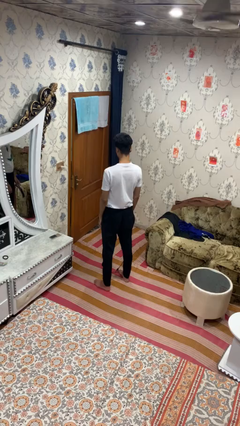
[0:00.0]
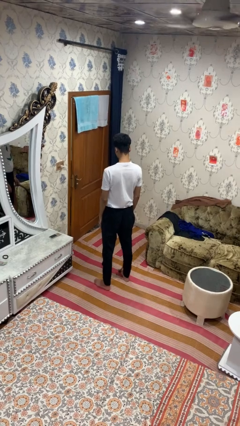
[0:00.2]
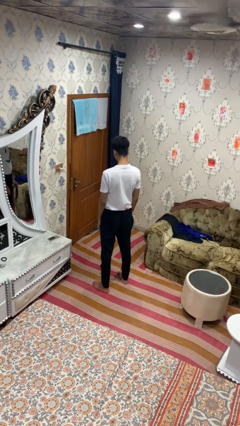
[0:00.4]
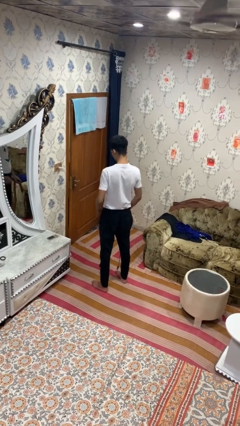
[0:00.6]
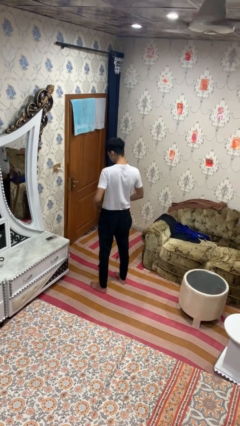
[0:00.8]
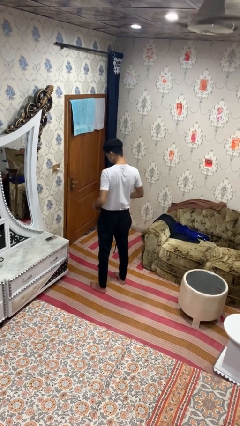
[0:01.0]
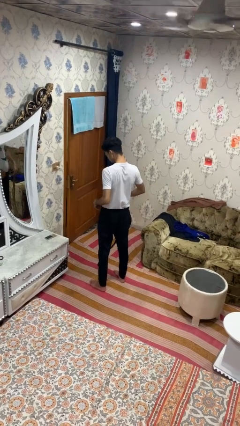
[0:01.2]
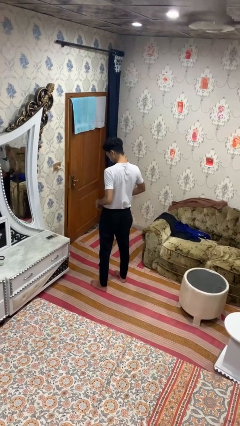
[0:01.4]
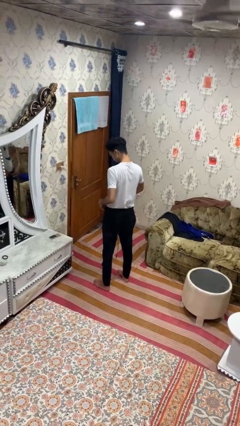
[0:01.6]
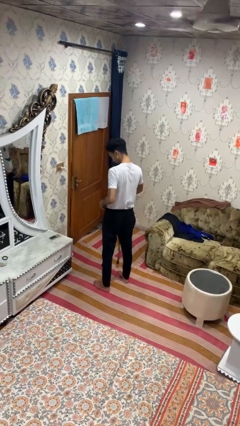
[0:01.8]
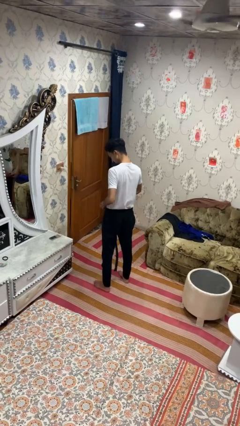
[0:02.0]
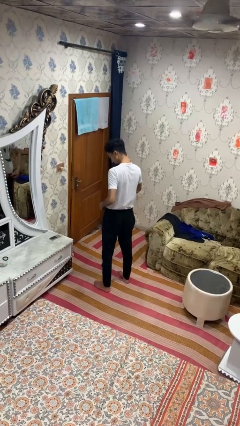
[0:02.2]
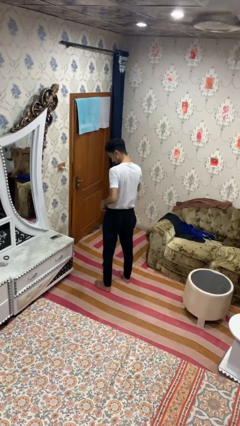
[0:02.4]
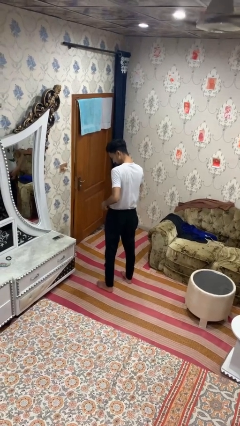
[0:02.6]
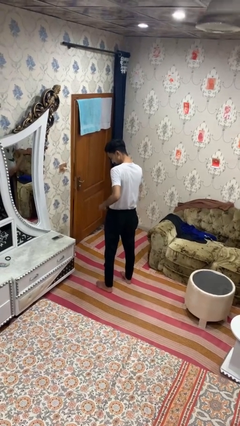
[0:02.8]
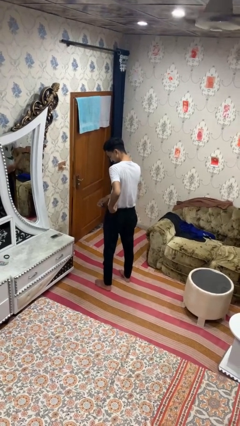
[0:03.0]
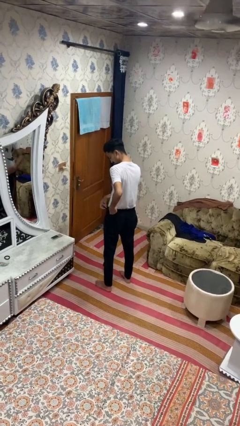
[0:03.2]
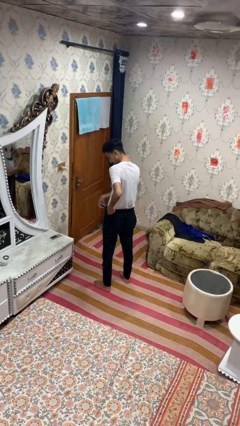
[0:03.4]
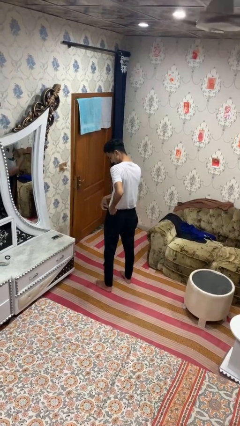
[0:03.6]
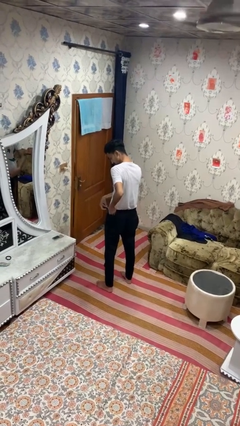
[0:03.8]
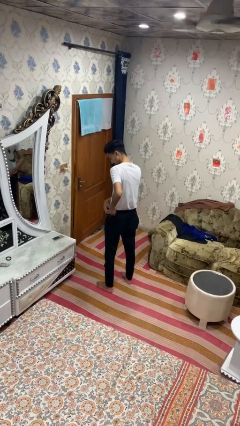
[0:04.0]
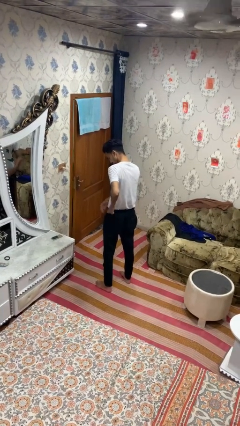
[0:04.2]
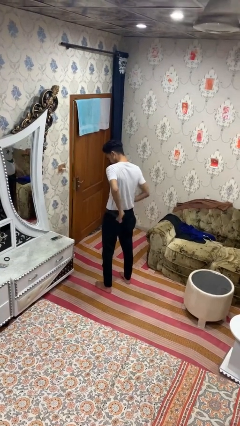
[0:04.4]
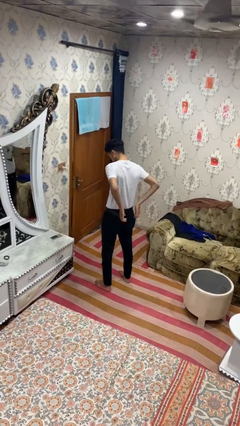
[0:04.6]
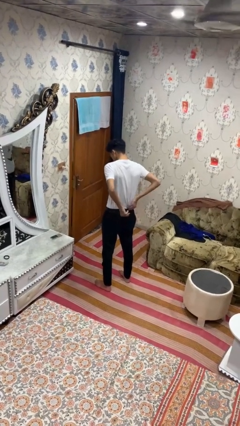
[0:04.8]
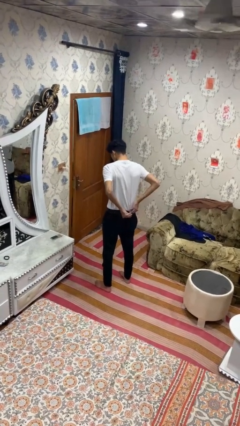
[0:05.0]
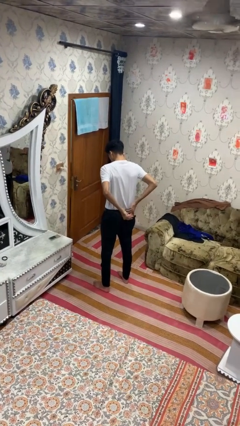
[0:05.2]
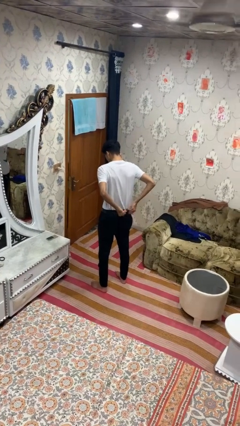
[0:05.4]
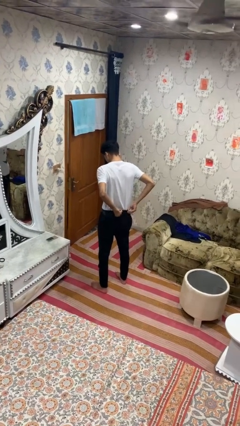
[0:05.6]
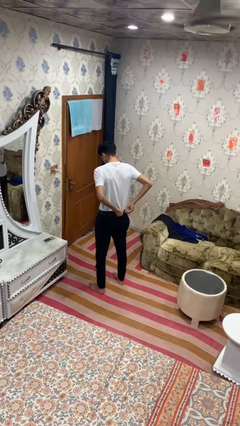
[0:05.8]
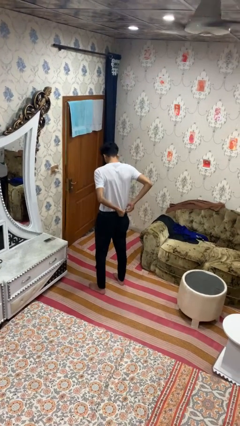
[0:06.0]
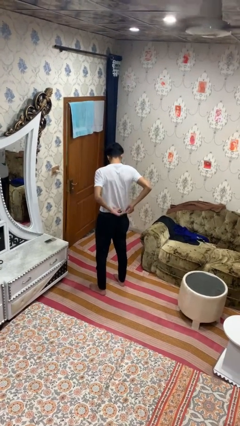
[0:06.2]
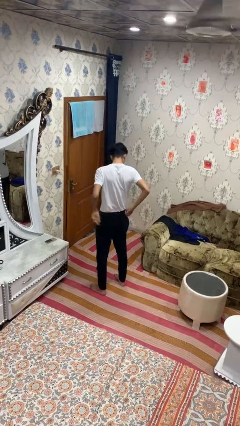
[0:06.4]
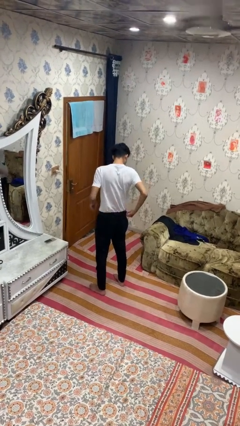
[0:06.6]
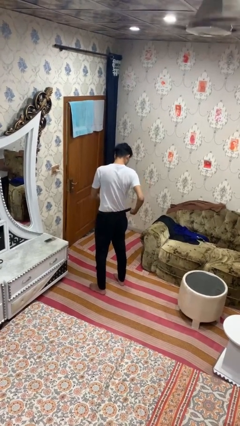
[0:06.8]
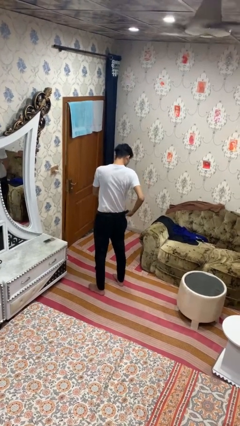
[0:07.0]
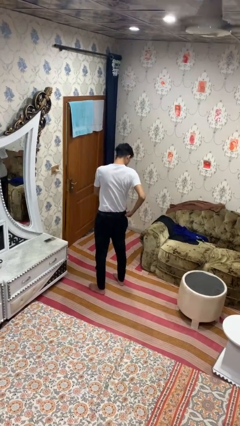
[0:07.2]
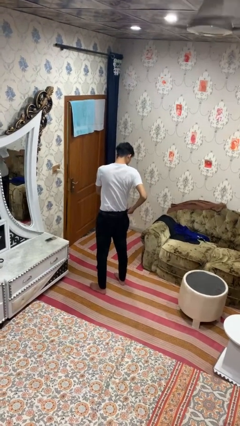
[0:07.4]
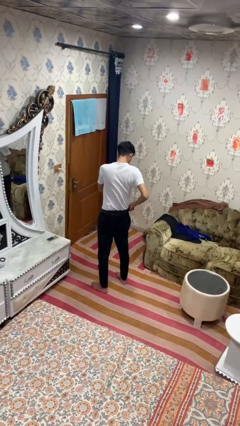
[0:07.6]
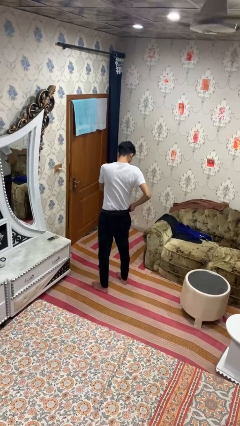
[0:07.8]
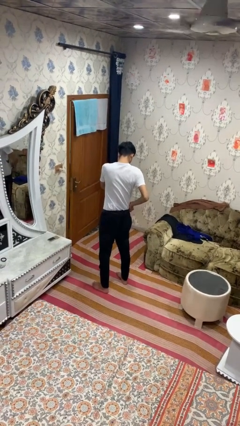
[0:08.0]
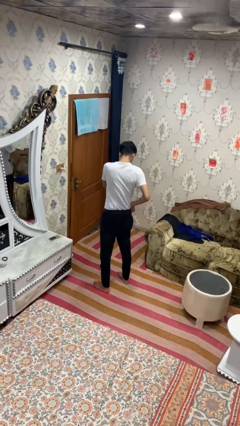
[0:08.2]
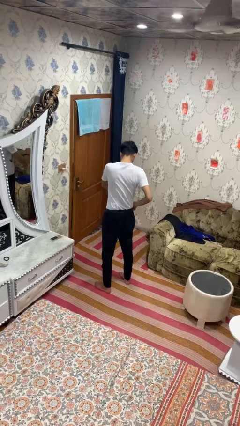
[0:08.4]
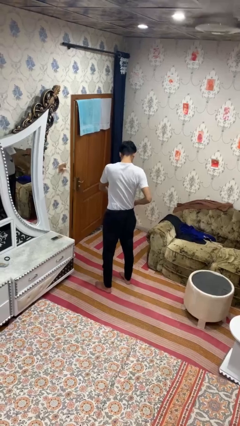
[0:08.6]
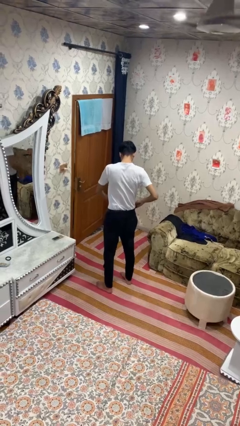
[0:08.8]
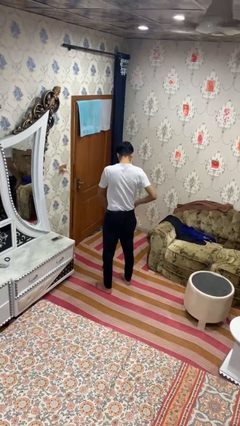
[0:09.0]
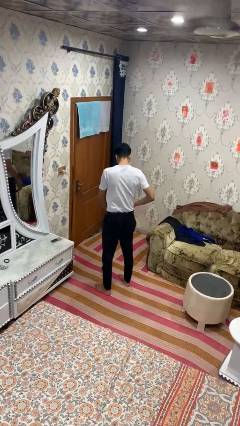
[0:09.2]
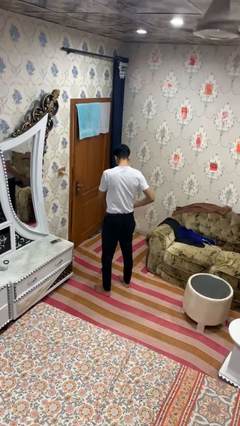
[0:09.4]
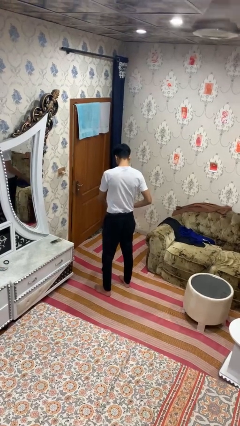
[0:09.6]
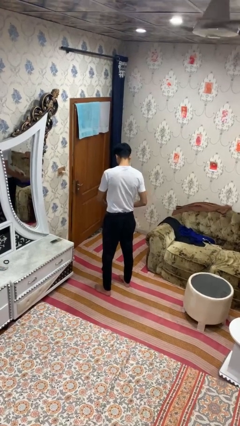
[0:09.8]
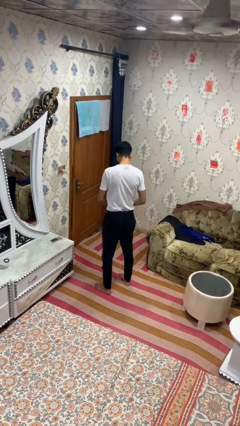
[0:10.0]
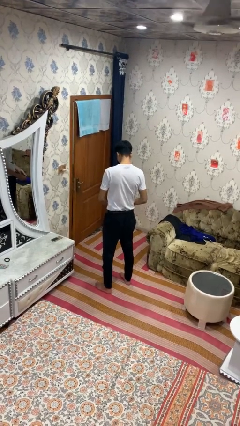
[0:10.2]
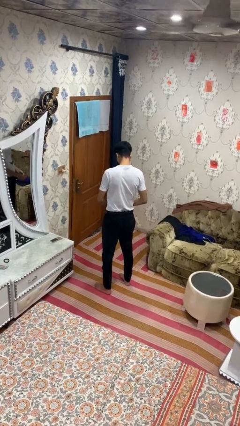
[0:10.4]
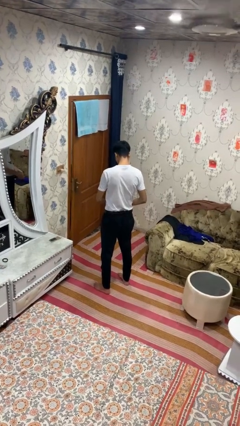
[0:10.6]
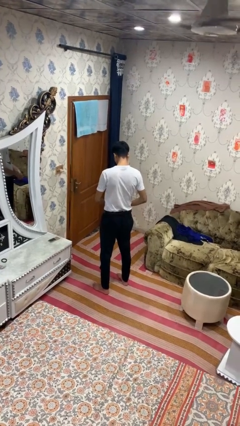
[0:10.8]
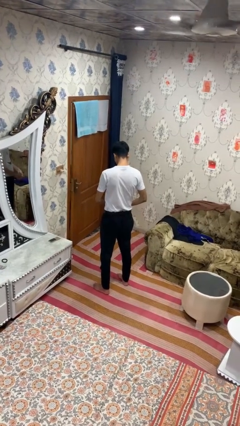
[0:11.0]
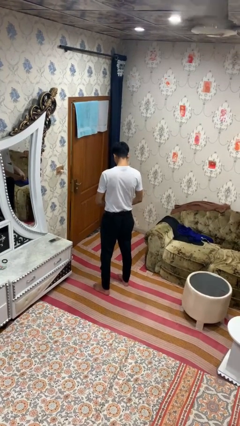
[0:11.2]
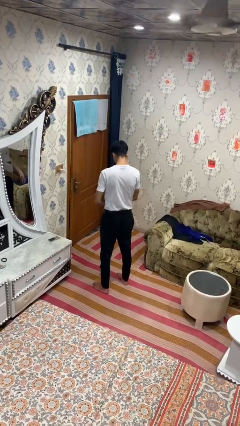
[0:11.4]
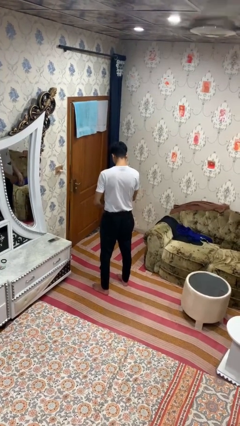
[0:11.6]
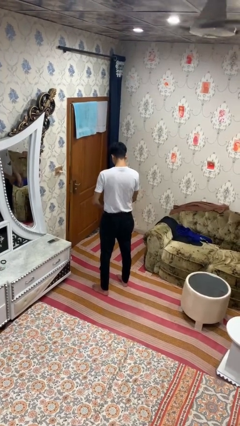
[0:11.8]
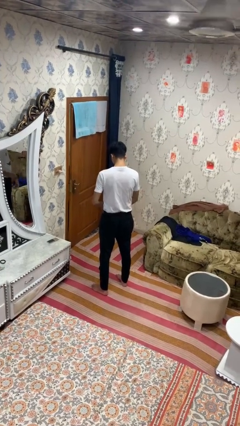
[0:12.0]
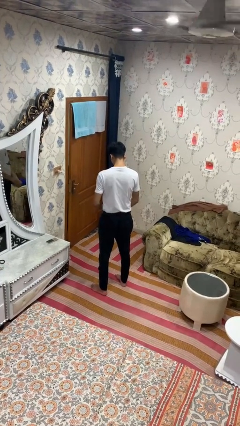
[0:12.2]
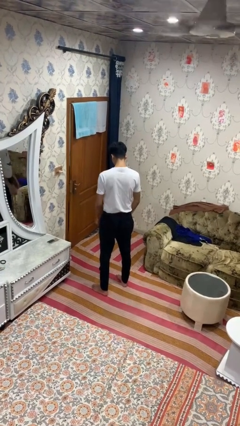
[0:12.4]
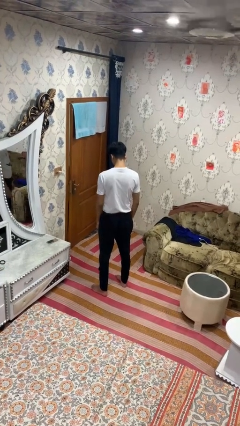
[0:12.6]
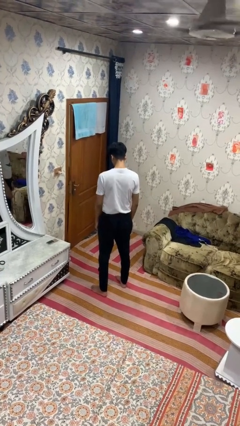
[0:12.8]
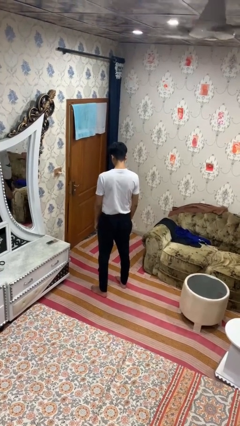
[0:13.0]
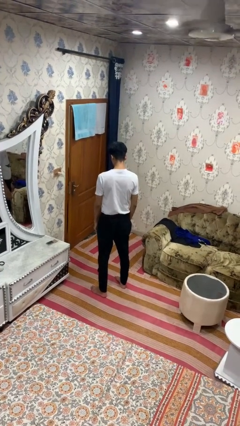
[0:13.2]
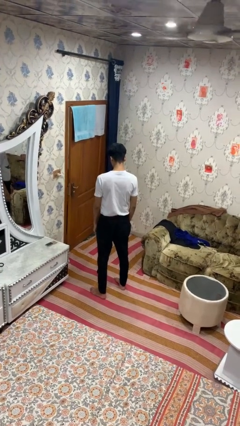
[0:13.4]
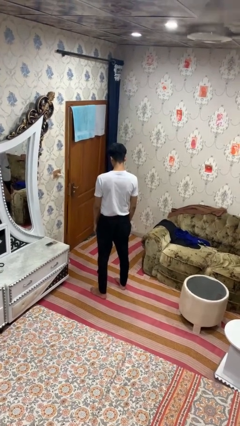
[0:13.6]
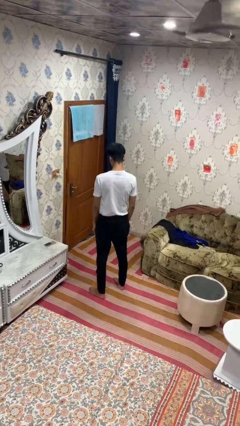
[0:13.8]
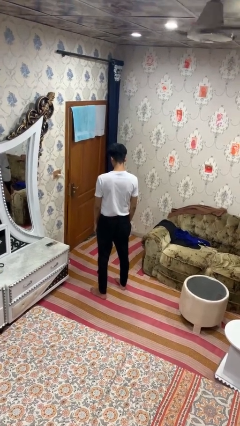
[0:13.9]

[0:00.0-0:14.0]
person puts on belt

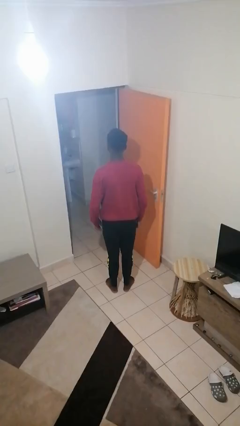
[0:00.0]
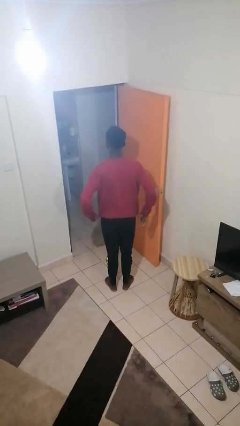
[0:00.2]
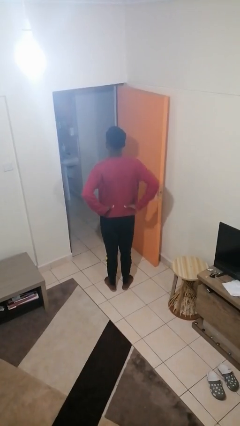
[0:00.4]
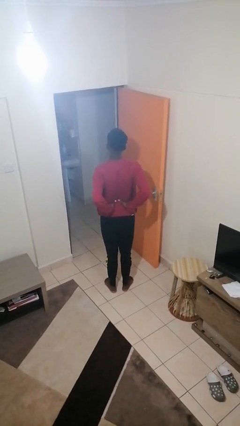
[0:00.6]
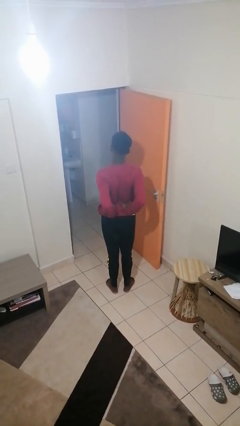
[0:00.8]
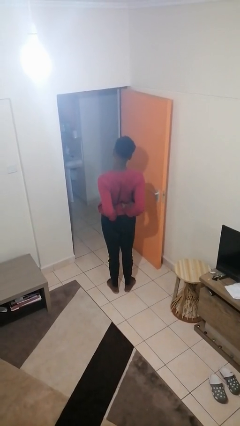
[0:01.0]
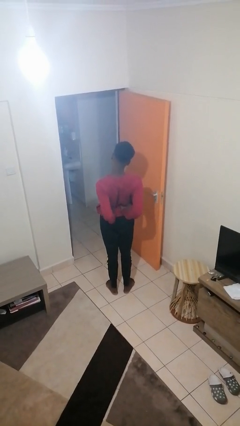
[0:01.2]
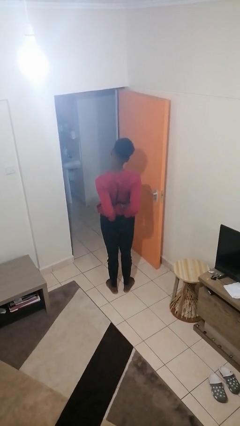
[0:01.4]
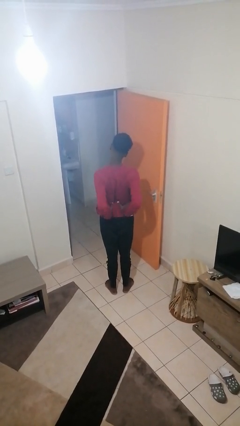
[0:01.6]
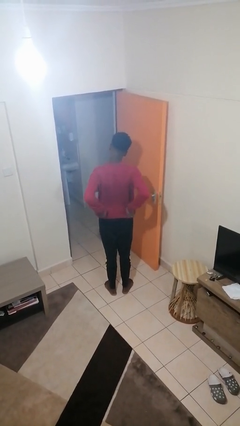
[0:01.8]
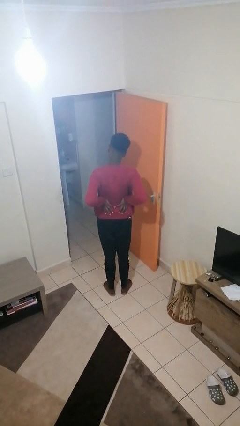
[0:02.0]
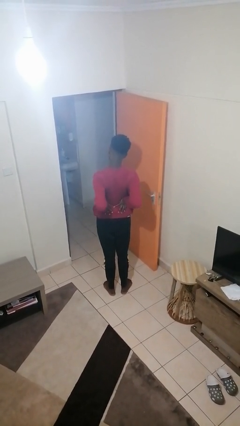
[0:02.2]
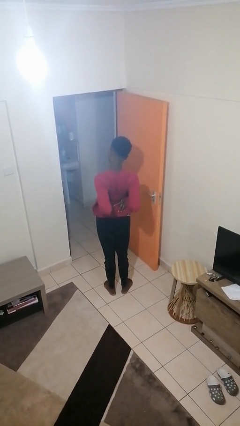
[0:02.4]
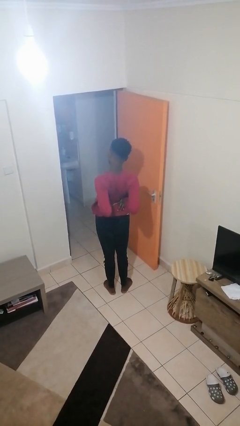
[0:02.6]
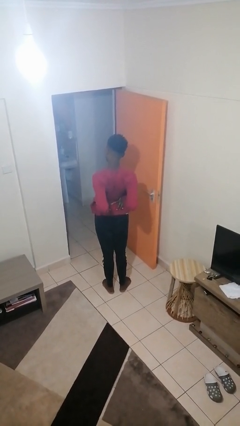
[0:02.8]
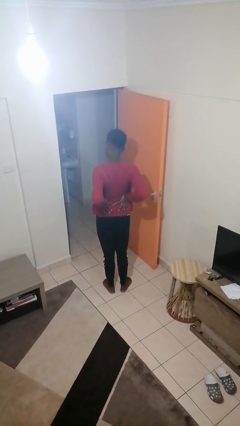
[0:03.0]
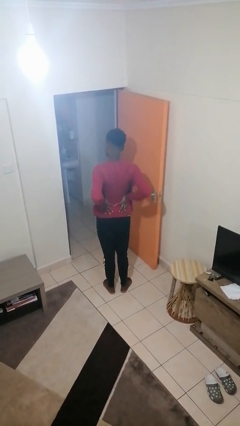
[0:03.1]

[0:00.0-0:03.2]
person stretches back

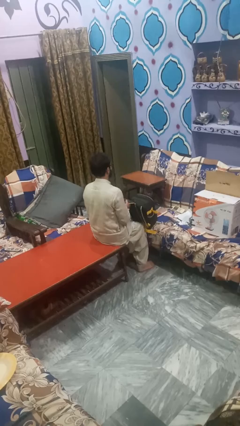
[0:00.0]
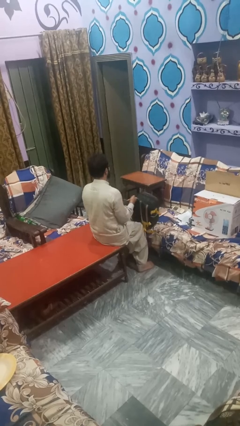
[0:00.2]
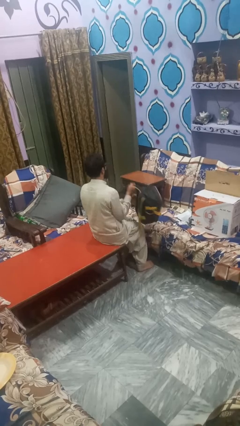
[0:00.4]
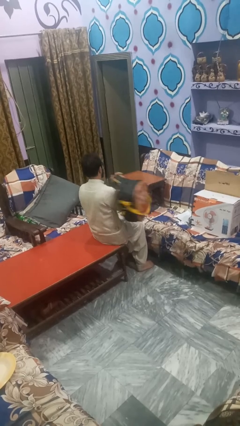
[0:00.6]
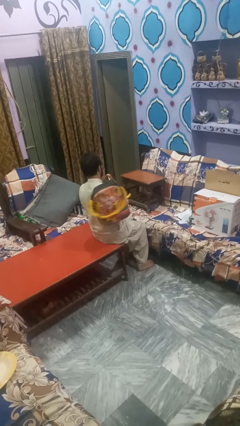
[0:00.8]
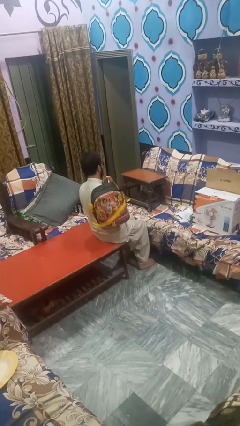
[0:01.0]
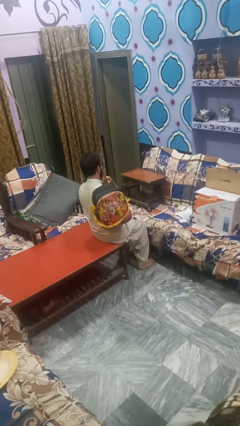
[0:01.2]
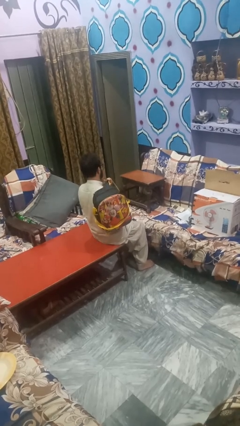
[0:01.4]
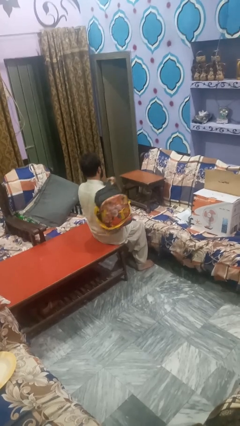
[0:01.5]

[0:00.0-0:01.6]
person puts on backpack
